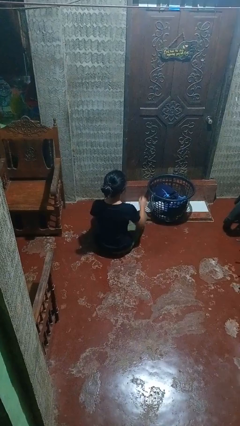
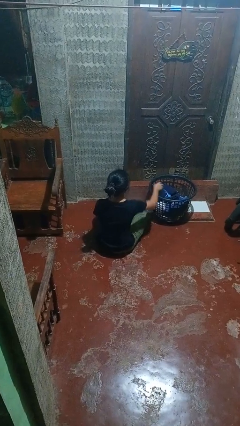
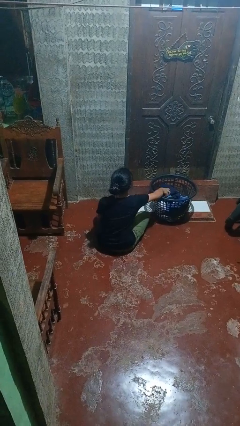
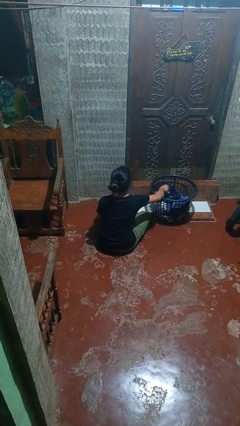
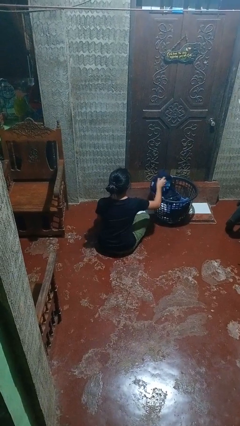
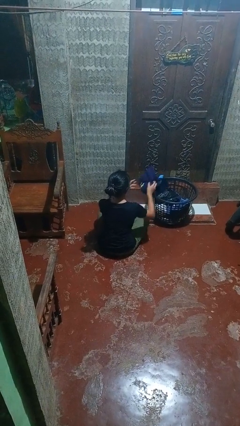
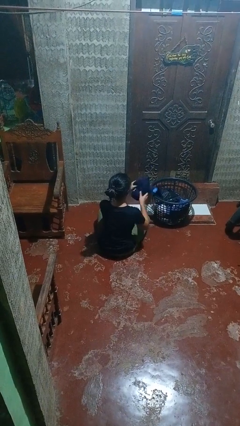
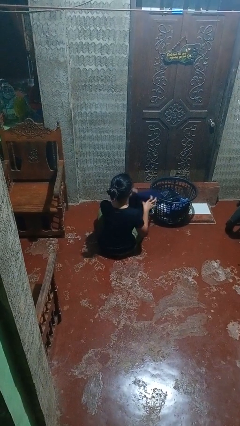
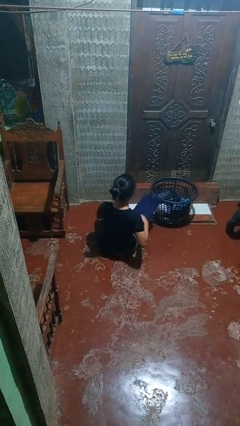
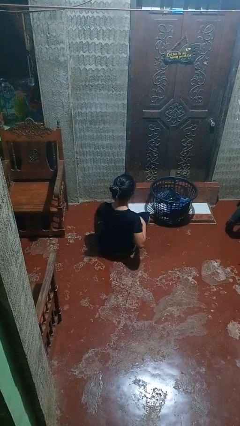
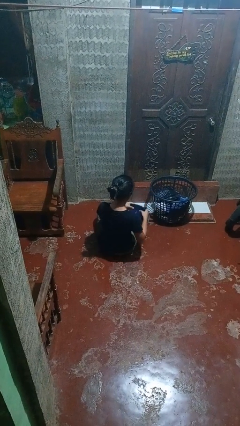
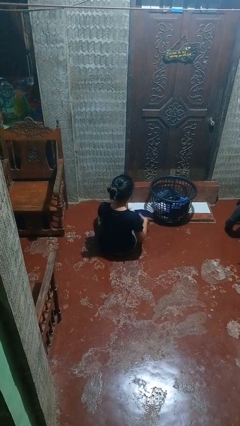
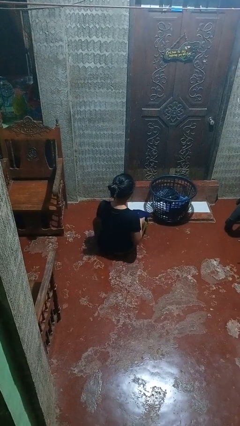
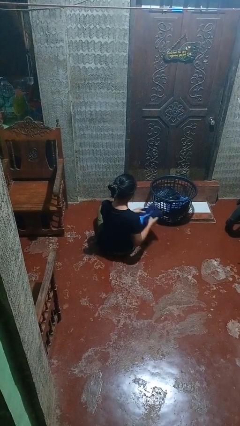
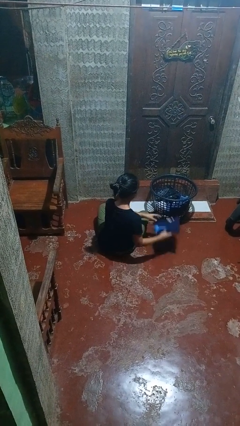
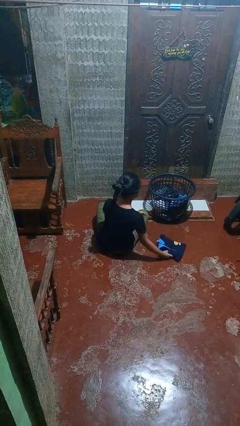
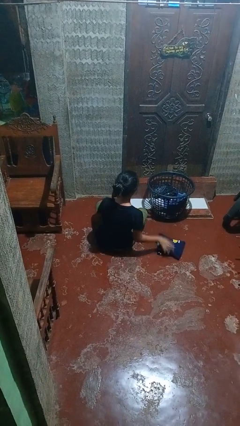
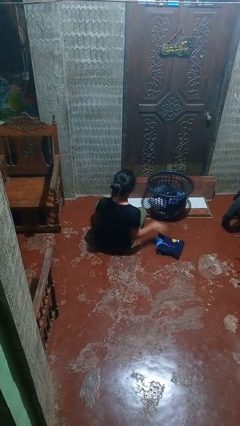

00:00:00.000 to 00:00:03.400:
person folds shirt

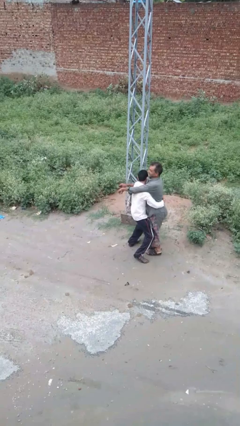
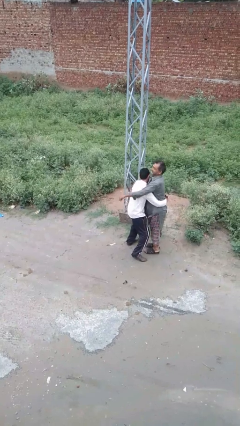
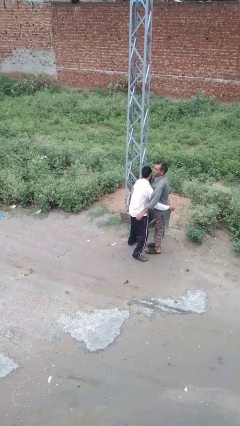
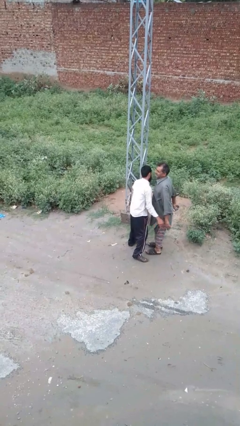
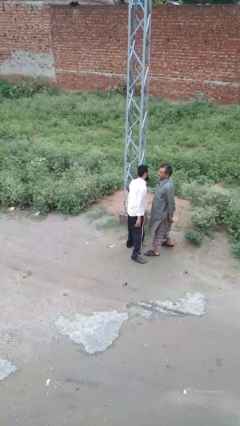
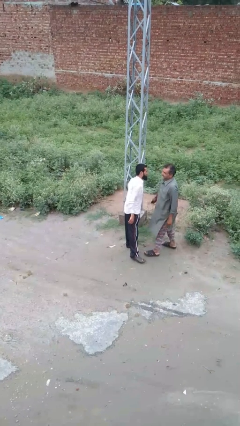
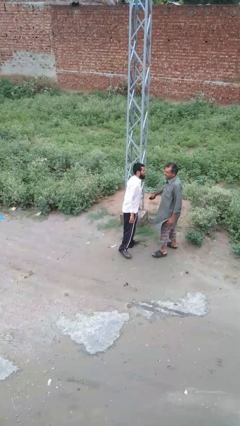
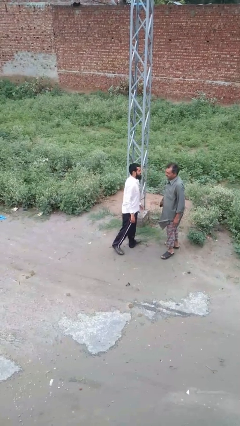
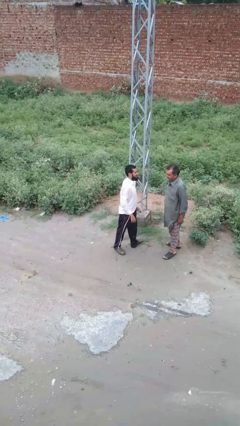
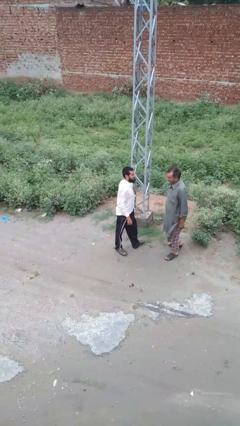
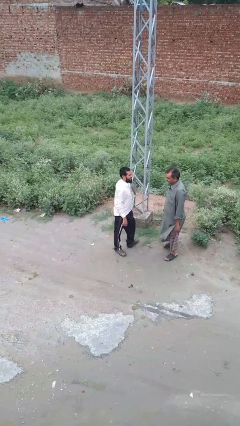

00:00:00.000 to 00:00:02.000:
person puts down person

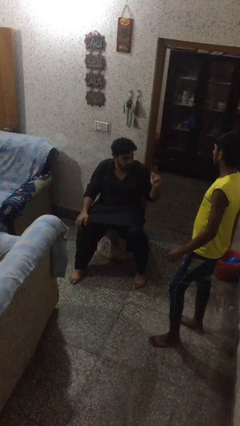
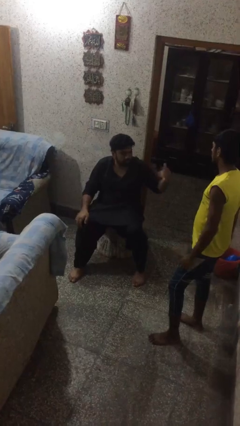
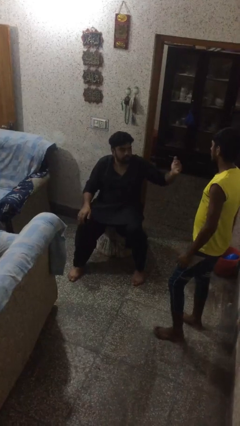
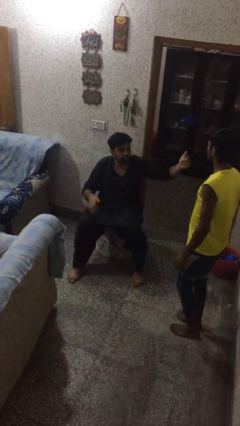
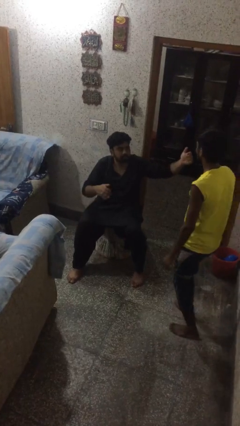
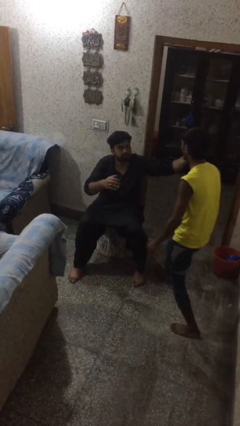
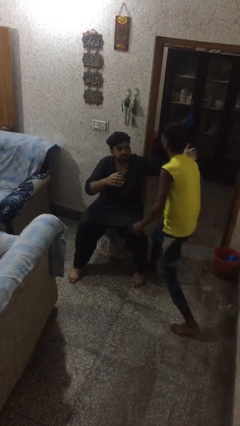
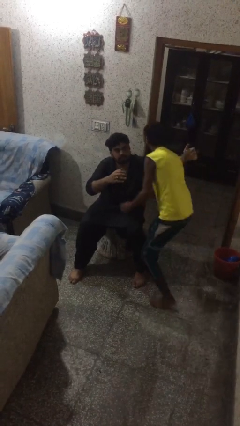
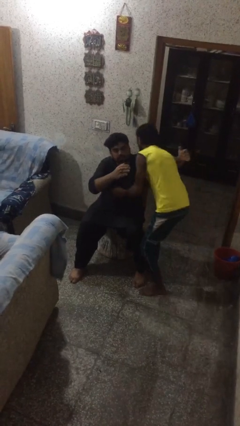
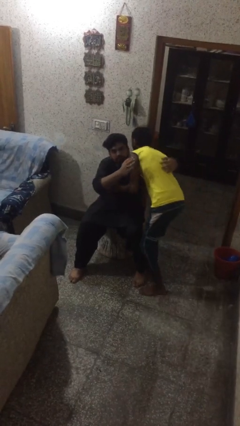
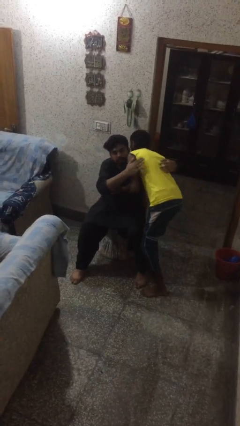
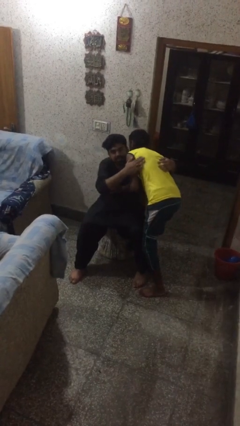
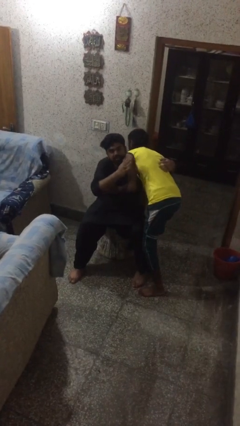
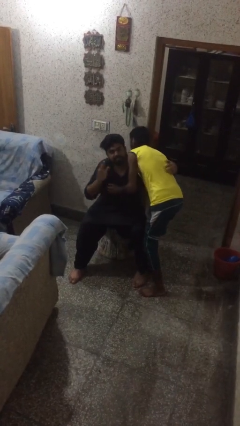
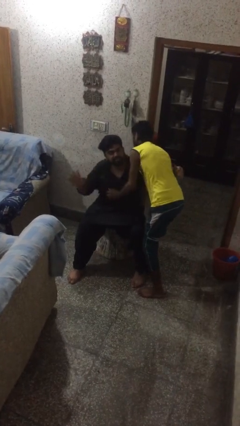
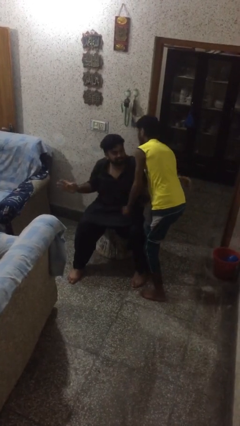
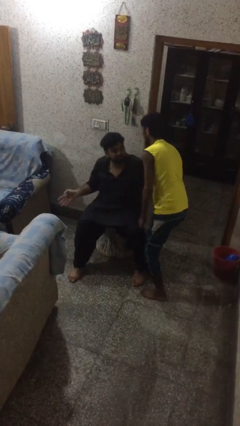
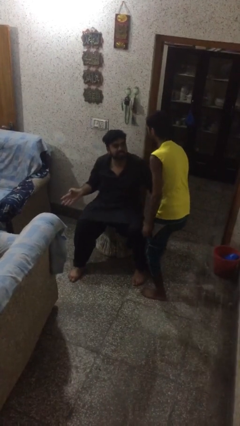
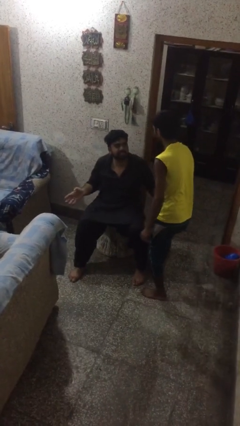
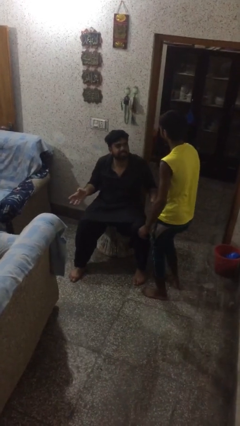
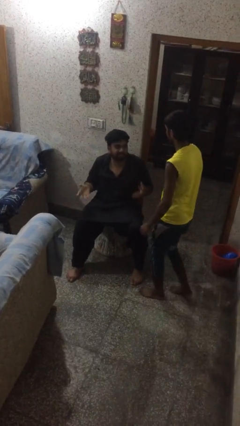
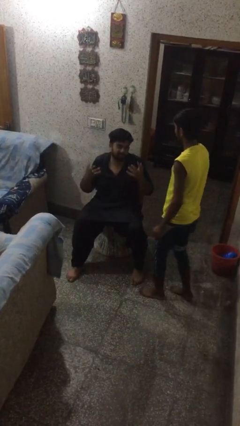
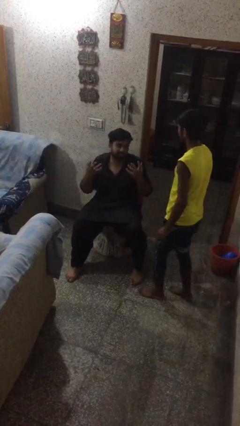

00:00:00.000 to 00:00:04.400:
person embraces person

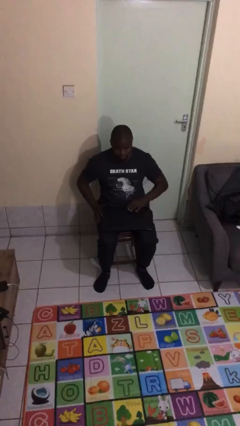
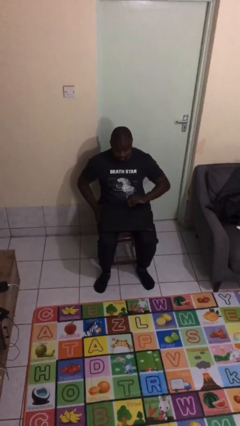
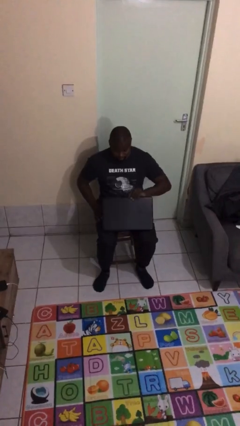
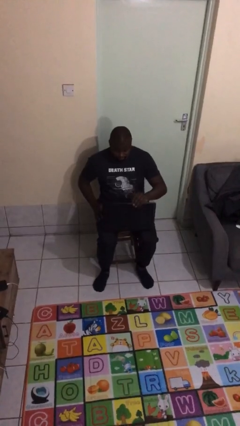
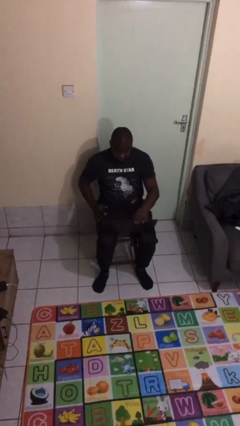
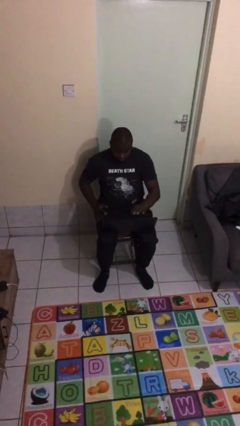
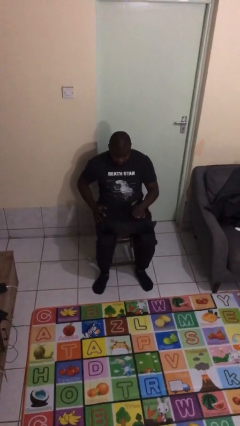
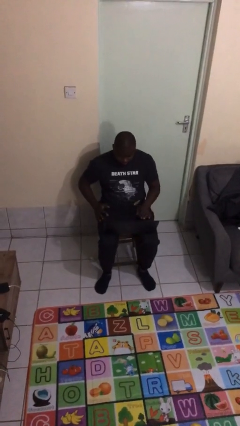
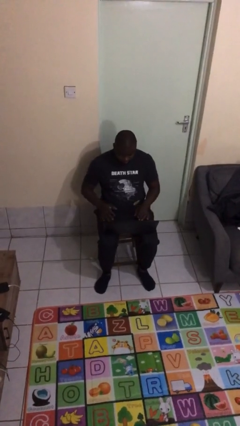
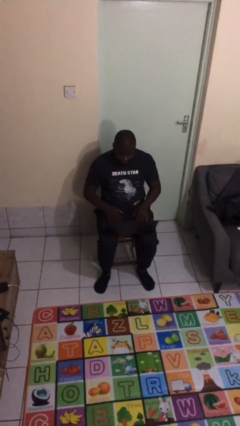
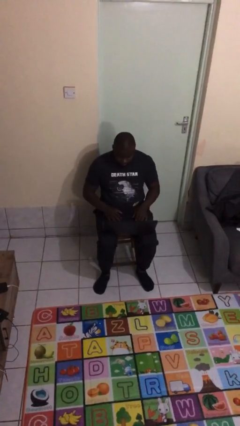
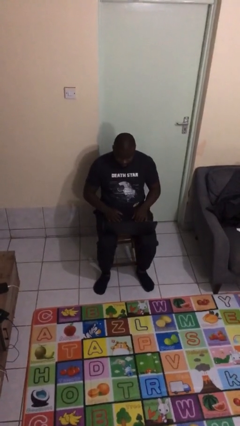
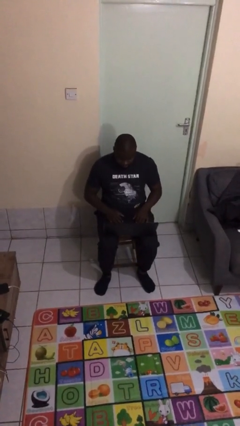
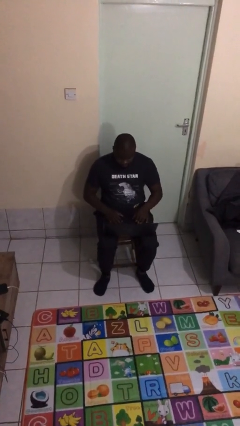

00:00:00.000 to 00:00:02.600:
person opens laptop

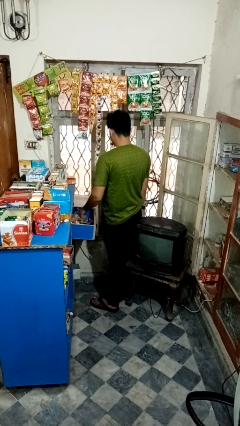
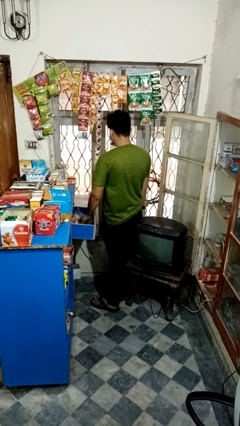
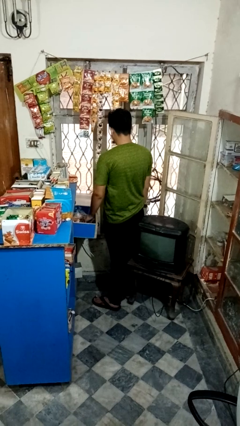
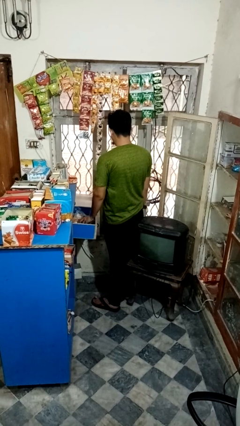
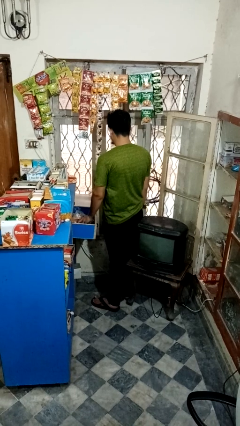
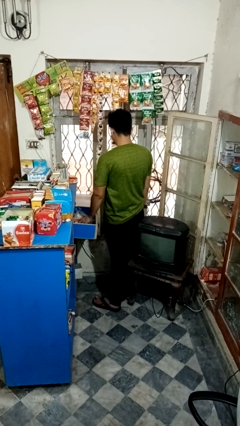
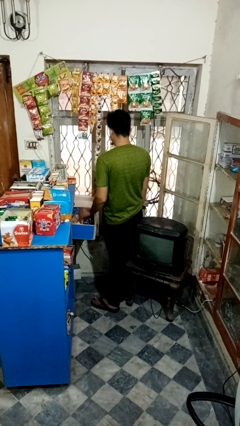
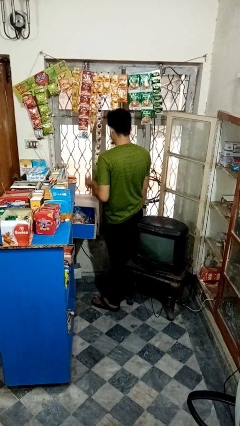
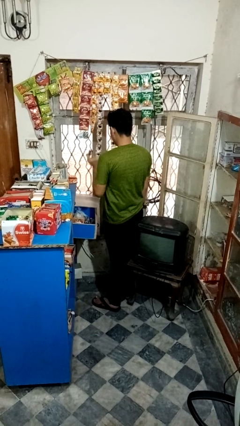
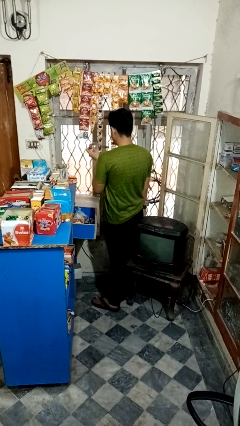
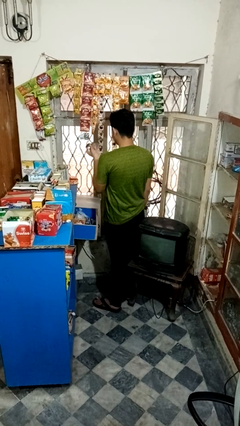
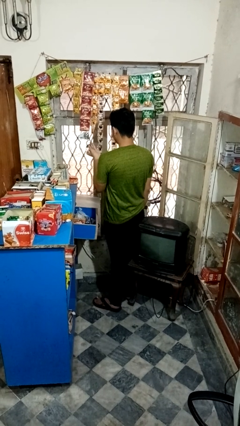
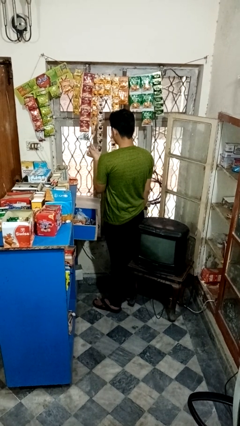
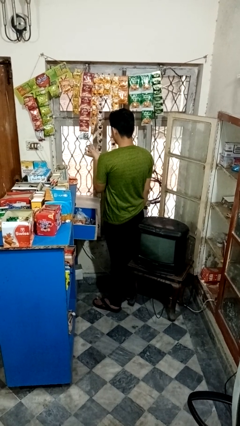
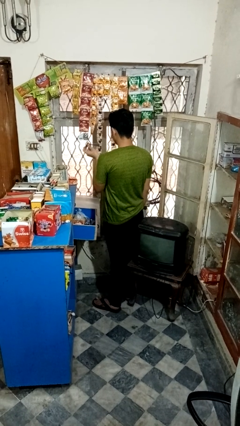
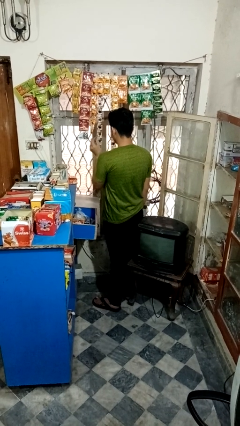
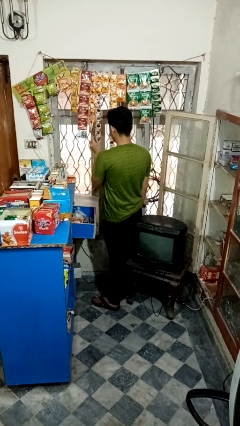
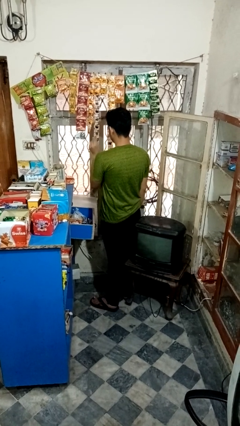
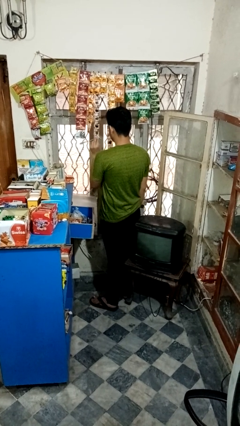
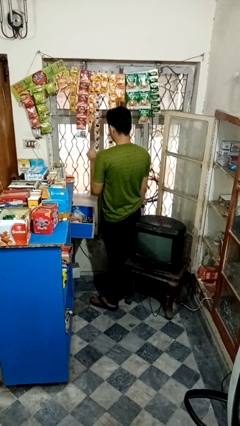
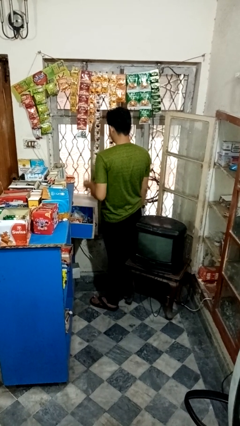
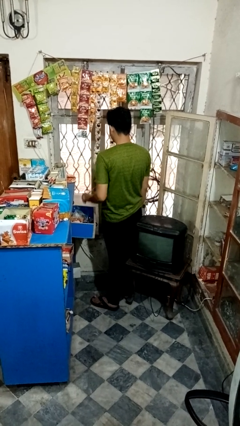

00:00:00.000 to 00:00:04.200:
person takes object from kitchen drawer

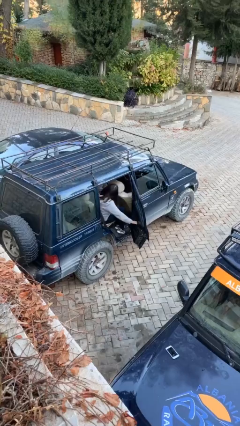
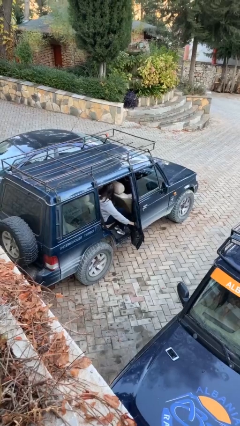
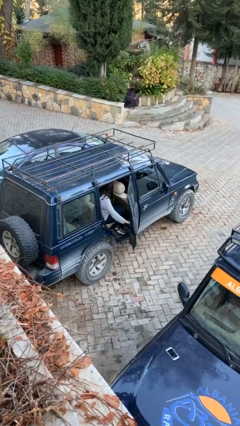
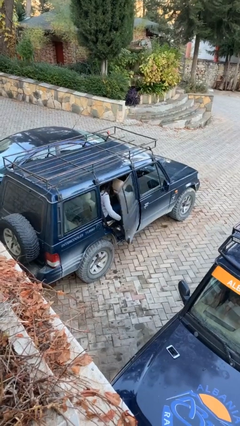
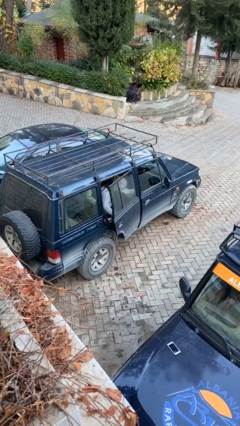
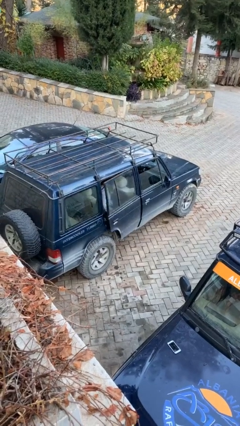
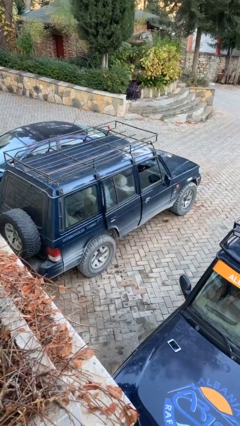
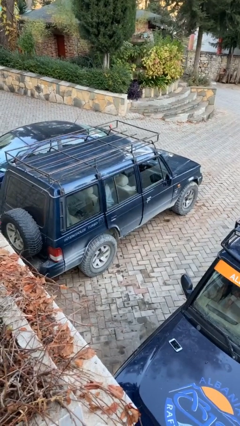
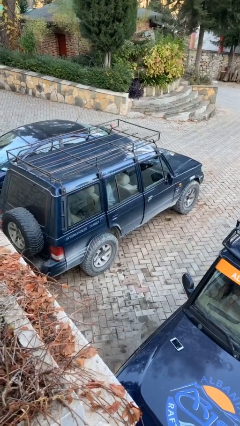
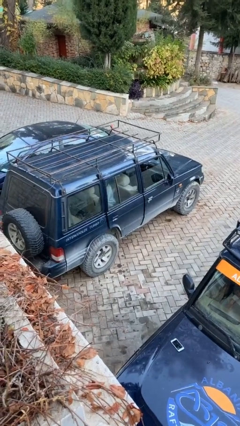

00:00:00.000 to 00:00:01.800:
person closes car door
